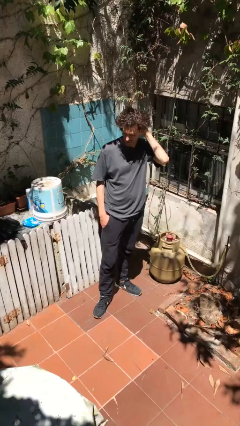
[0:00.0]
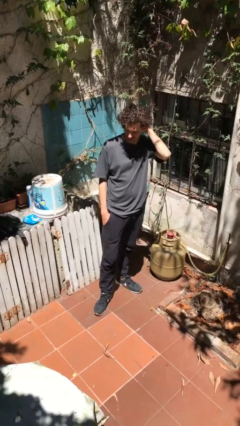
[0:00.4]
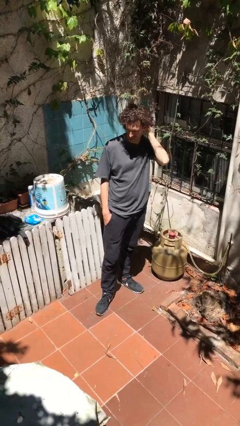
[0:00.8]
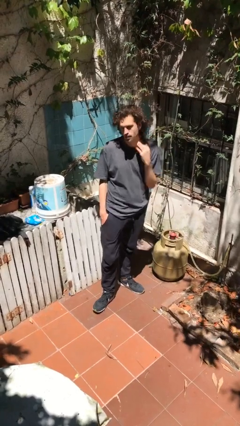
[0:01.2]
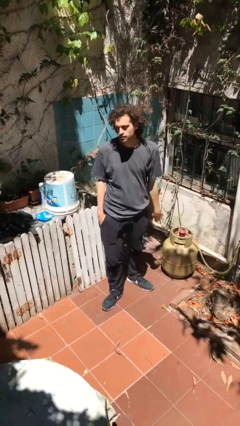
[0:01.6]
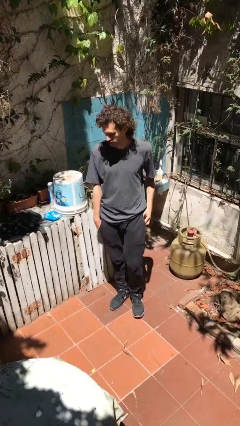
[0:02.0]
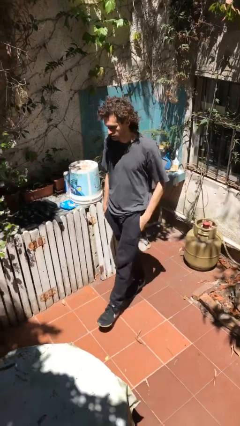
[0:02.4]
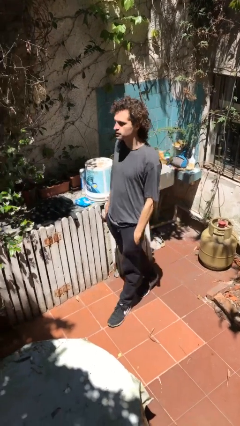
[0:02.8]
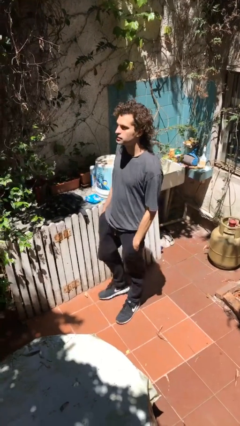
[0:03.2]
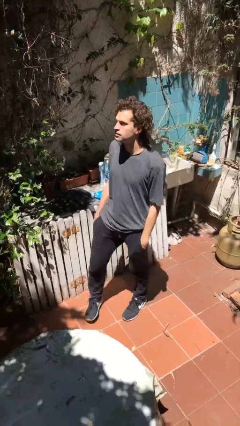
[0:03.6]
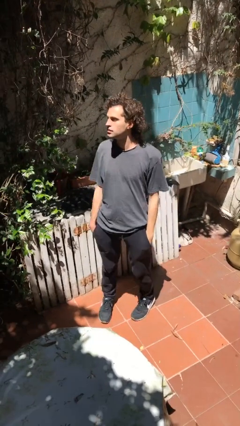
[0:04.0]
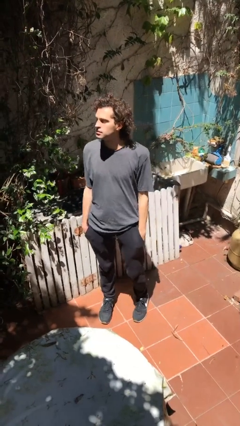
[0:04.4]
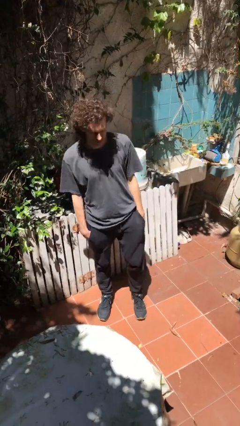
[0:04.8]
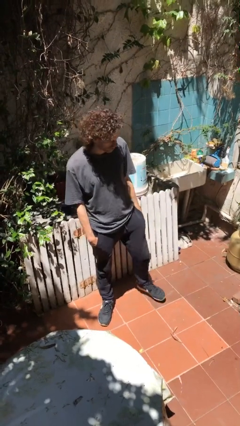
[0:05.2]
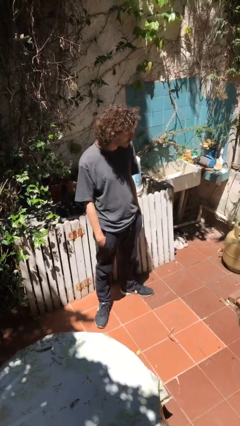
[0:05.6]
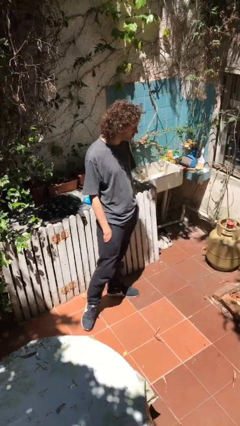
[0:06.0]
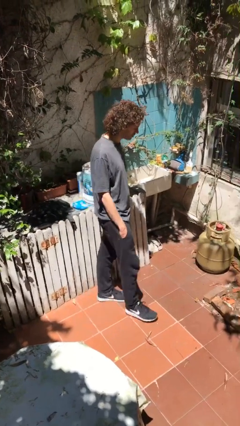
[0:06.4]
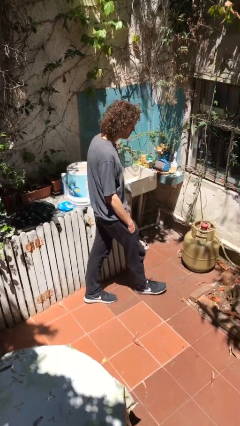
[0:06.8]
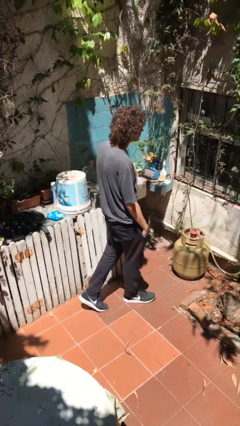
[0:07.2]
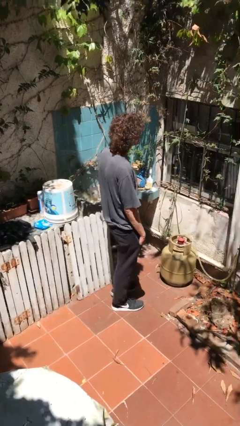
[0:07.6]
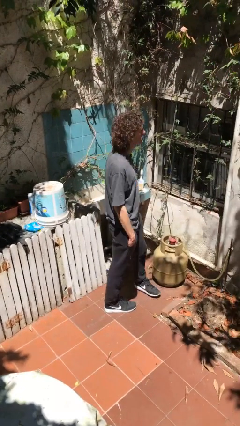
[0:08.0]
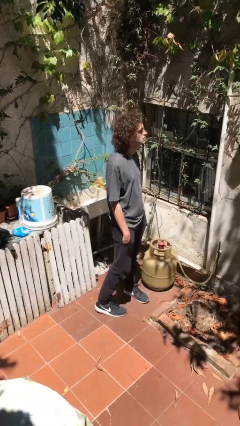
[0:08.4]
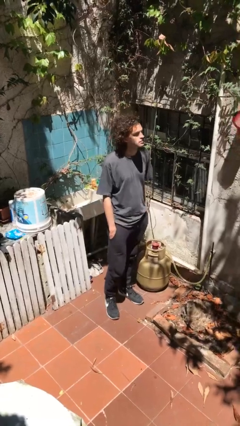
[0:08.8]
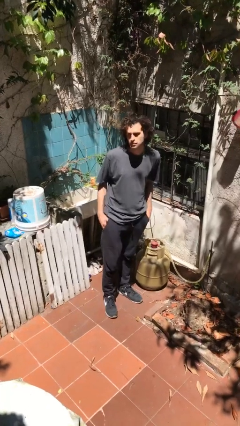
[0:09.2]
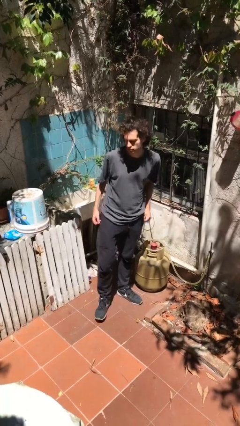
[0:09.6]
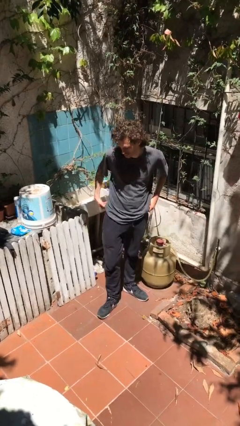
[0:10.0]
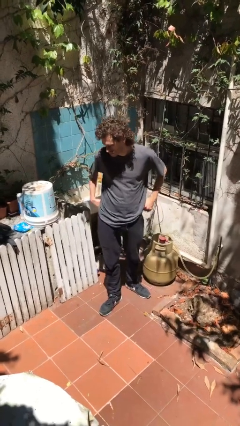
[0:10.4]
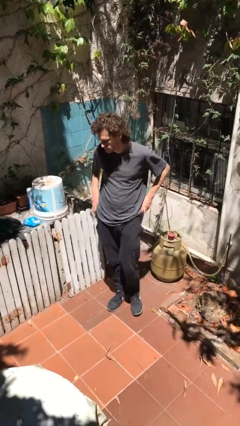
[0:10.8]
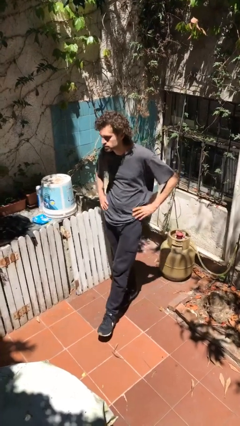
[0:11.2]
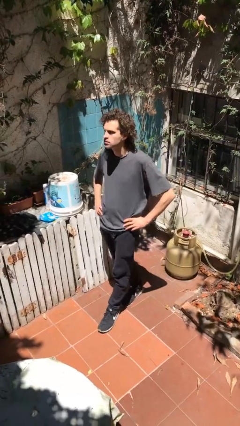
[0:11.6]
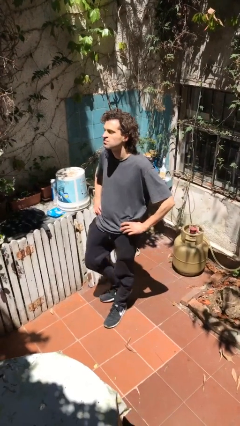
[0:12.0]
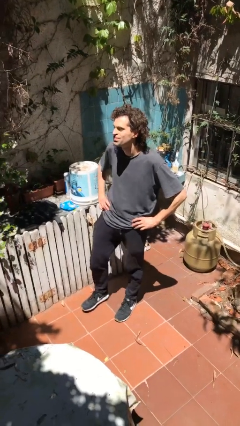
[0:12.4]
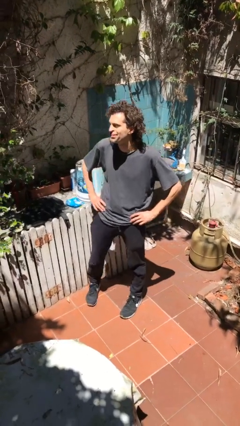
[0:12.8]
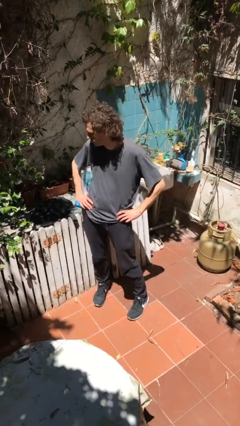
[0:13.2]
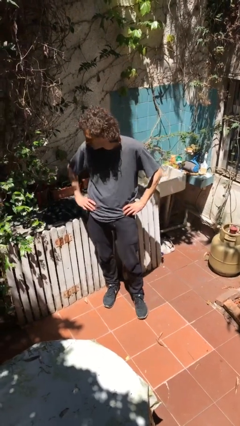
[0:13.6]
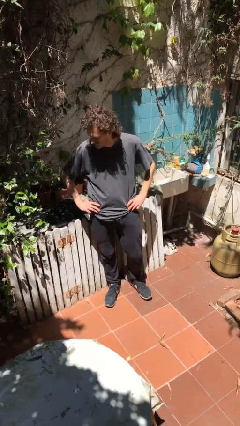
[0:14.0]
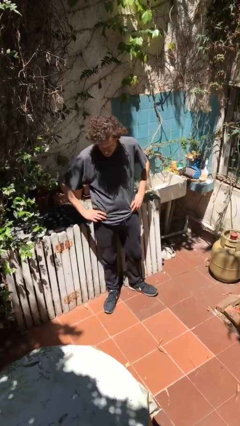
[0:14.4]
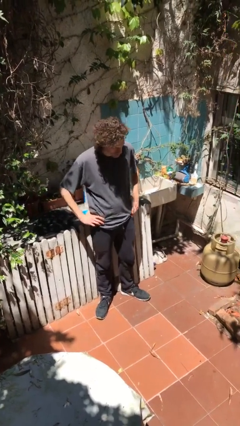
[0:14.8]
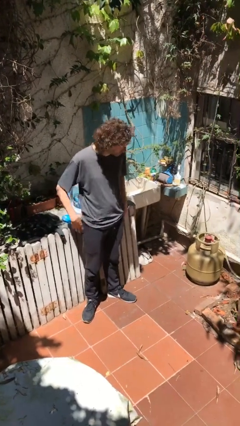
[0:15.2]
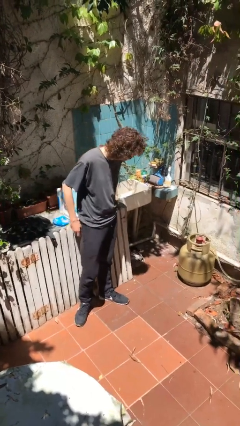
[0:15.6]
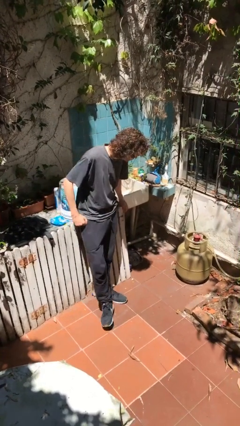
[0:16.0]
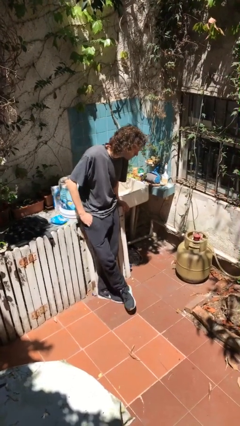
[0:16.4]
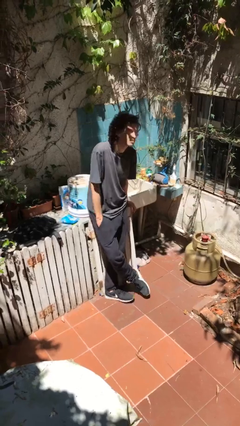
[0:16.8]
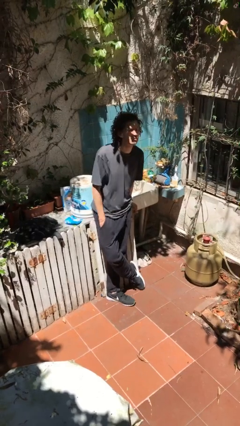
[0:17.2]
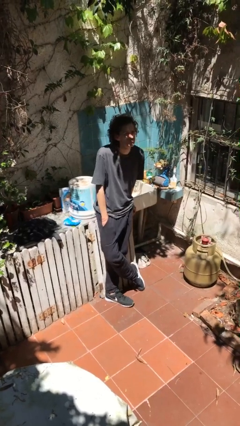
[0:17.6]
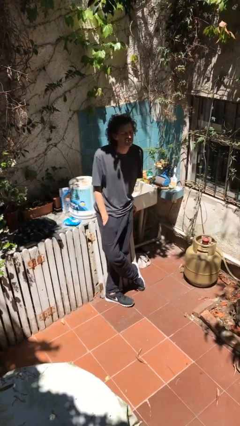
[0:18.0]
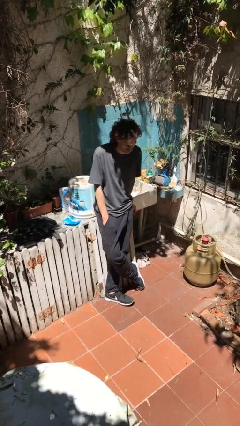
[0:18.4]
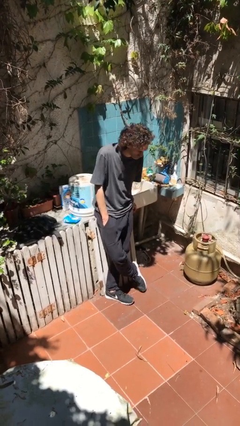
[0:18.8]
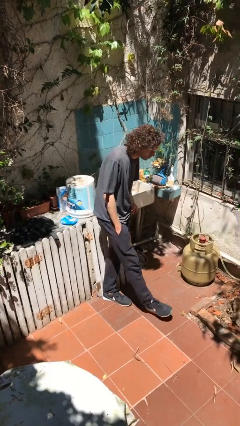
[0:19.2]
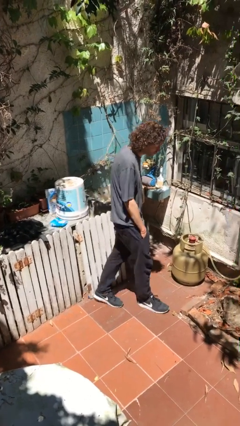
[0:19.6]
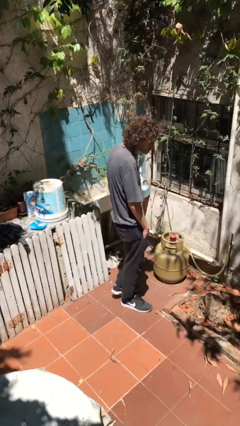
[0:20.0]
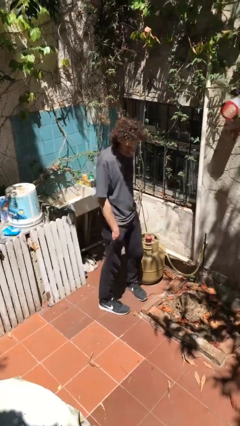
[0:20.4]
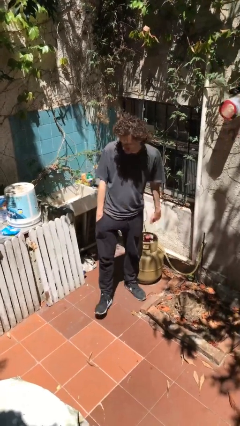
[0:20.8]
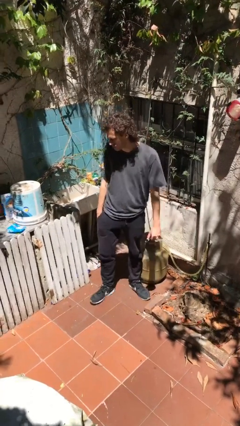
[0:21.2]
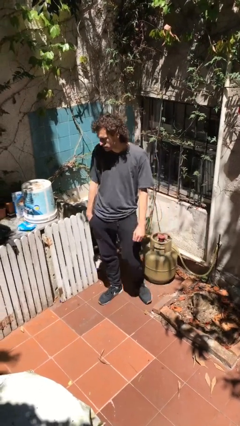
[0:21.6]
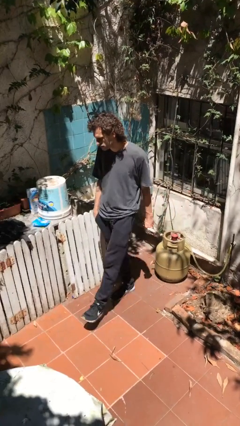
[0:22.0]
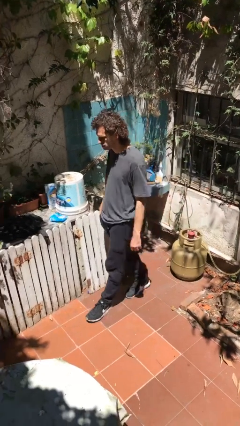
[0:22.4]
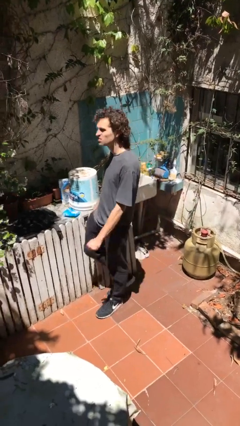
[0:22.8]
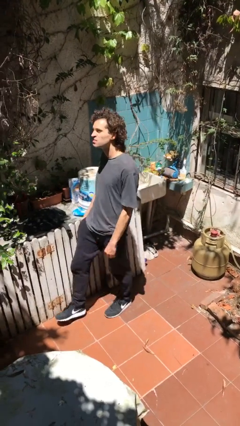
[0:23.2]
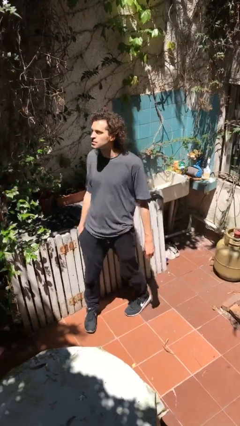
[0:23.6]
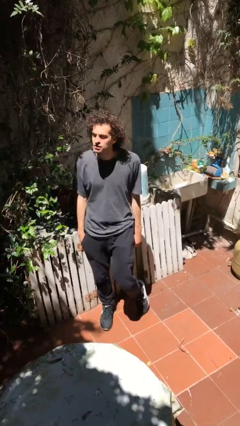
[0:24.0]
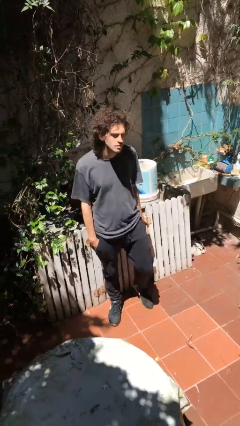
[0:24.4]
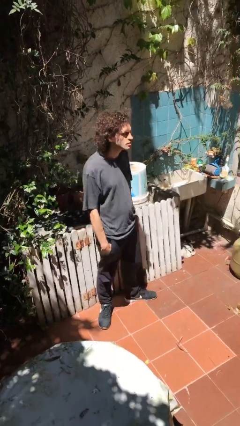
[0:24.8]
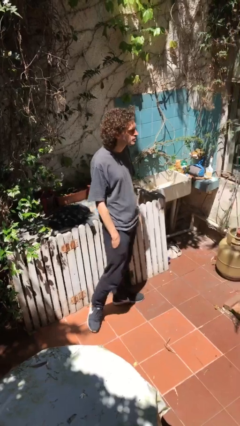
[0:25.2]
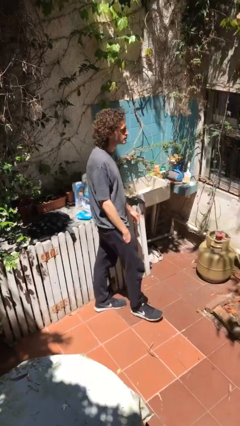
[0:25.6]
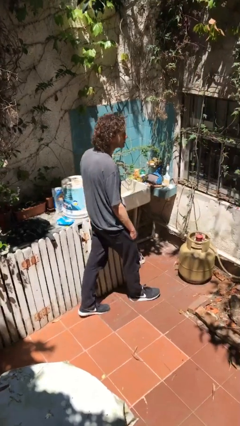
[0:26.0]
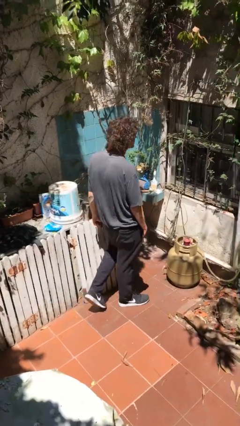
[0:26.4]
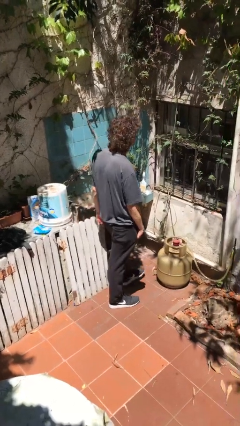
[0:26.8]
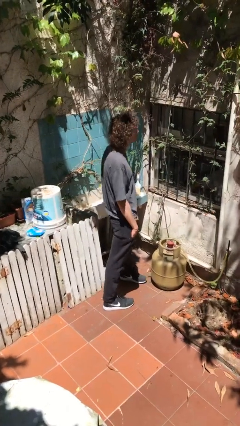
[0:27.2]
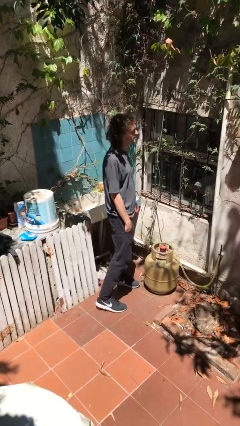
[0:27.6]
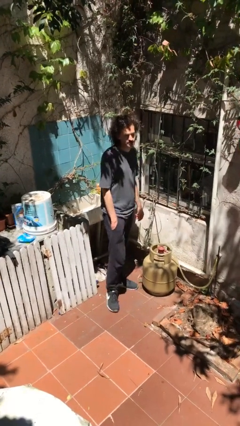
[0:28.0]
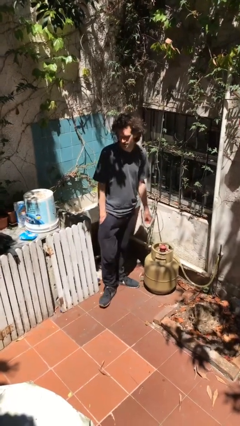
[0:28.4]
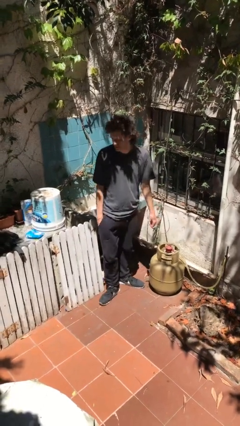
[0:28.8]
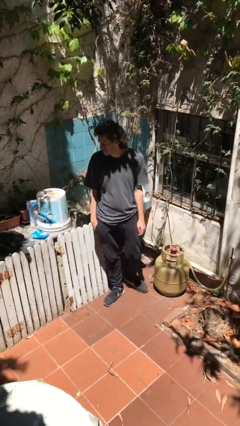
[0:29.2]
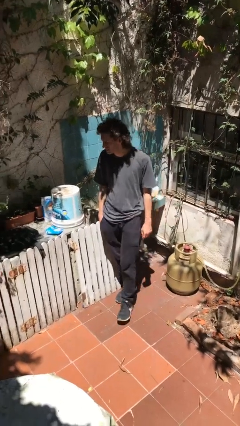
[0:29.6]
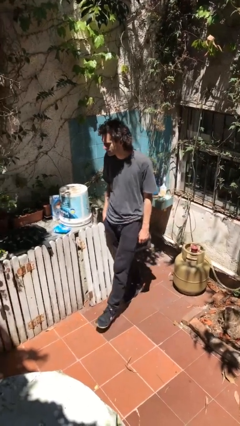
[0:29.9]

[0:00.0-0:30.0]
person walks

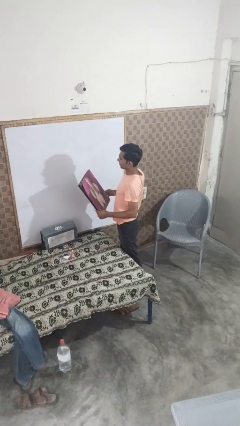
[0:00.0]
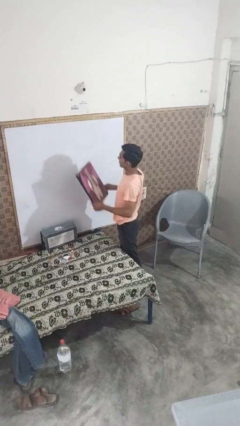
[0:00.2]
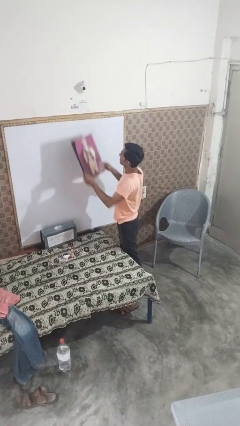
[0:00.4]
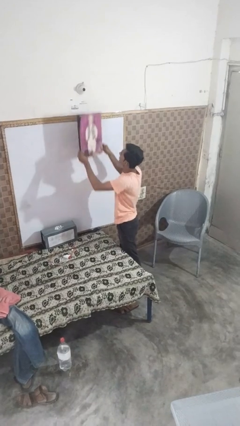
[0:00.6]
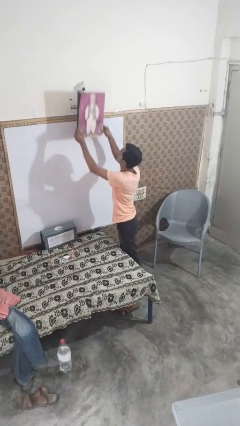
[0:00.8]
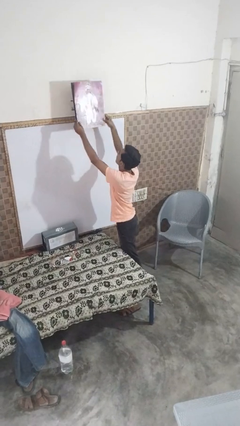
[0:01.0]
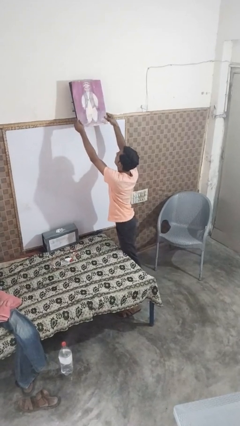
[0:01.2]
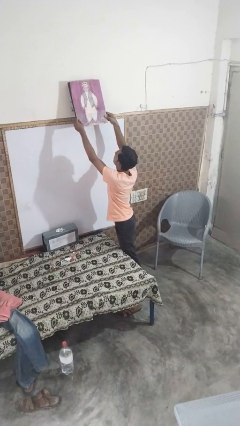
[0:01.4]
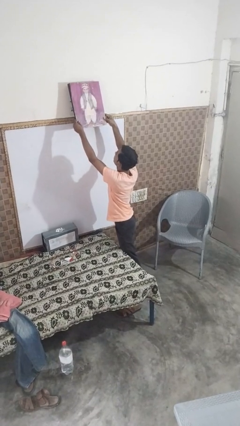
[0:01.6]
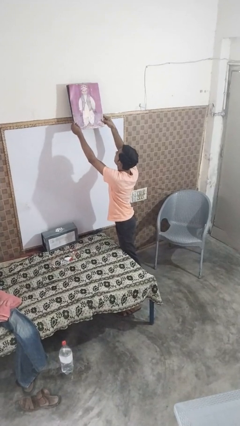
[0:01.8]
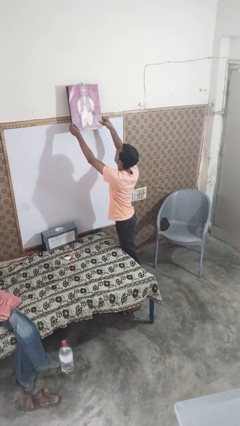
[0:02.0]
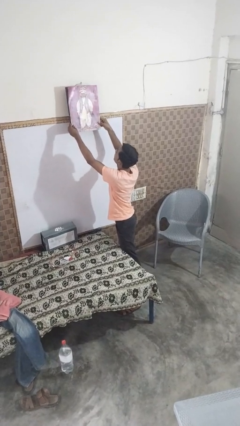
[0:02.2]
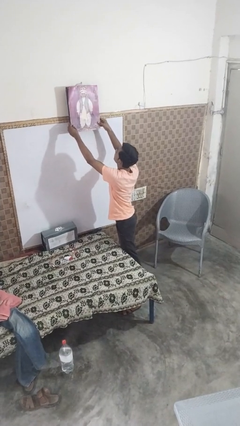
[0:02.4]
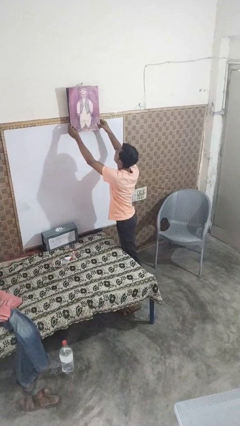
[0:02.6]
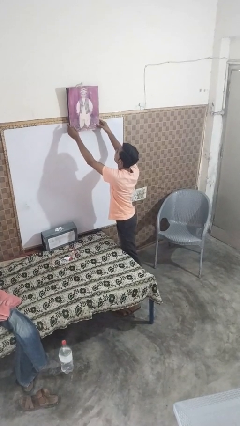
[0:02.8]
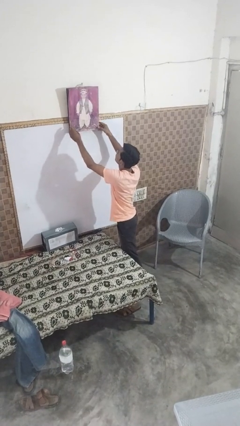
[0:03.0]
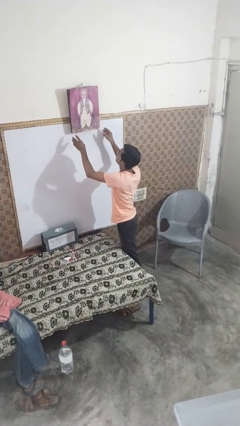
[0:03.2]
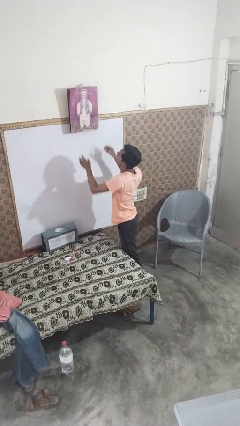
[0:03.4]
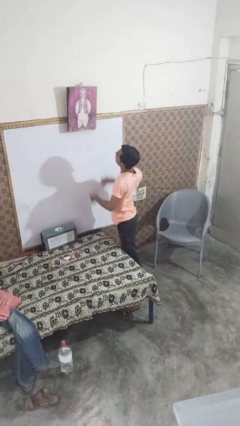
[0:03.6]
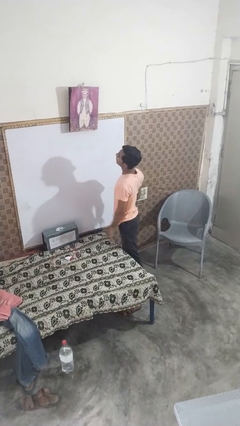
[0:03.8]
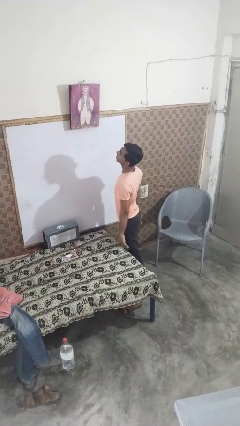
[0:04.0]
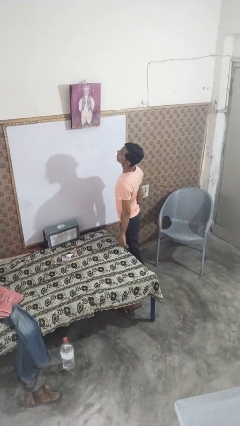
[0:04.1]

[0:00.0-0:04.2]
person puts up picture frame
